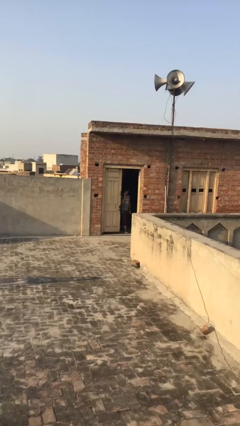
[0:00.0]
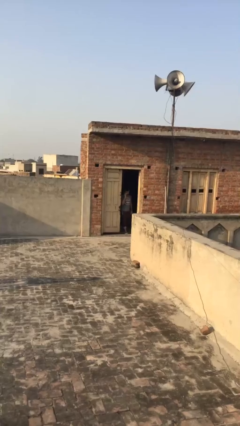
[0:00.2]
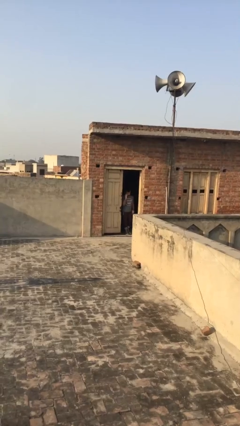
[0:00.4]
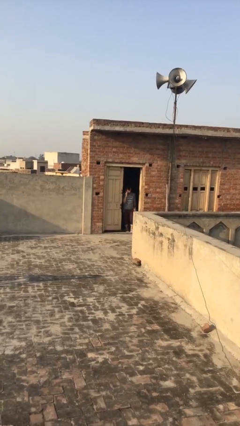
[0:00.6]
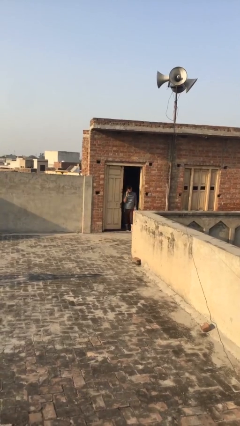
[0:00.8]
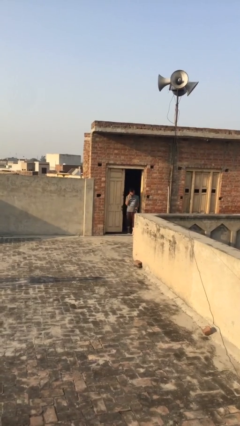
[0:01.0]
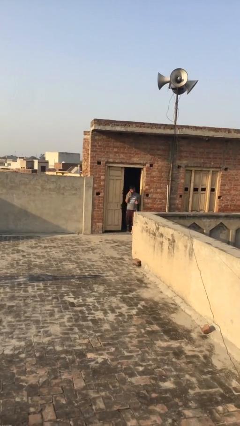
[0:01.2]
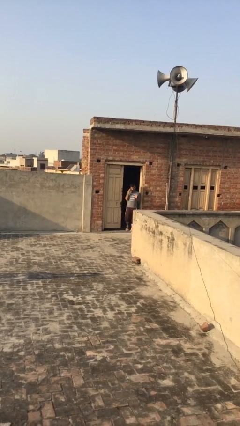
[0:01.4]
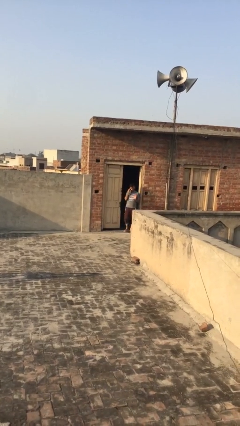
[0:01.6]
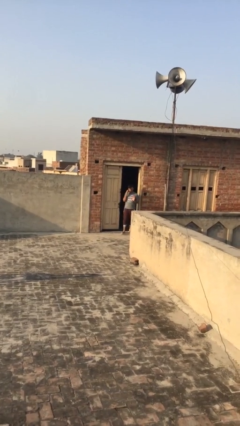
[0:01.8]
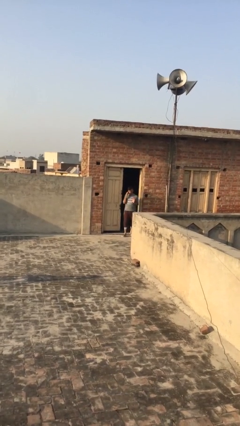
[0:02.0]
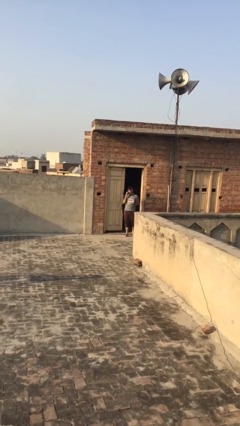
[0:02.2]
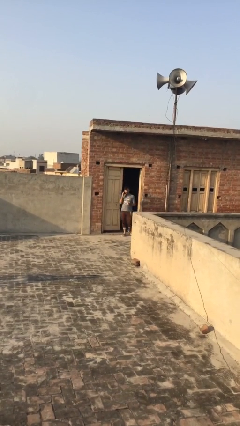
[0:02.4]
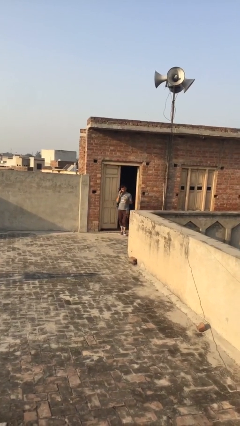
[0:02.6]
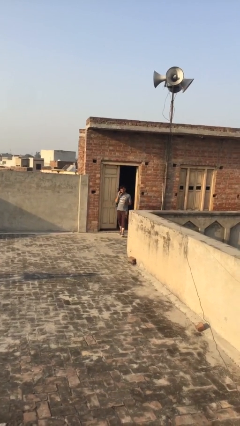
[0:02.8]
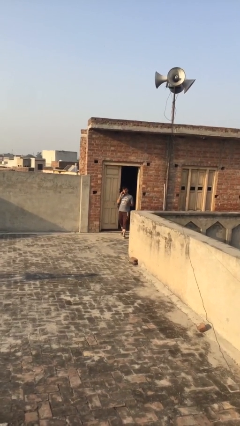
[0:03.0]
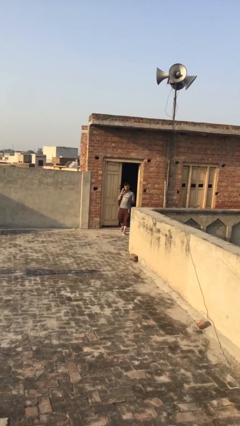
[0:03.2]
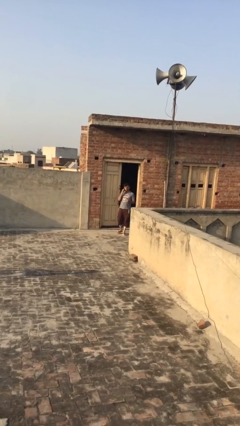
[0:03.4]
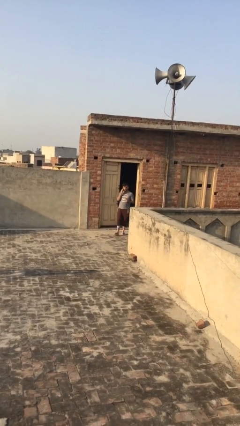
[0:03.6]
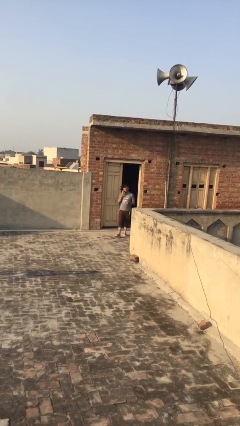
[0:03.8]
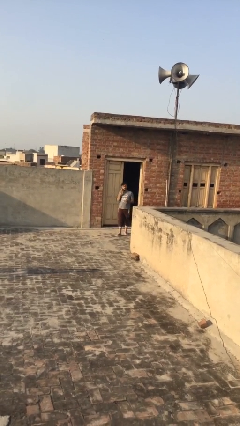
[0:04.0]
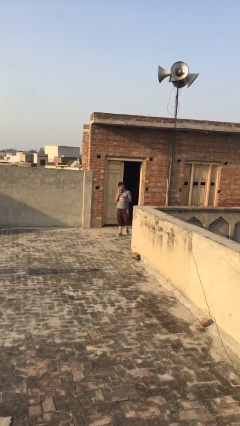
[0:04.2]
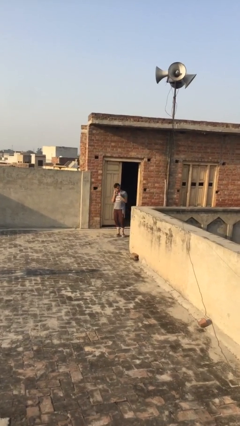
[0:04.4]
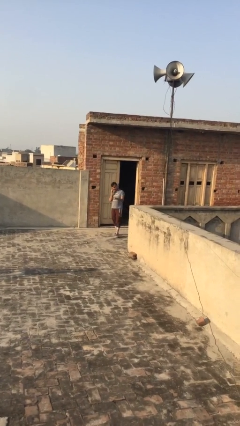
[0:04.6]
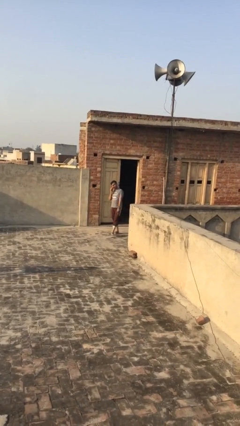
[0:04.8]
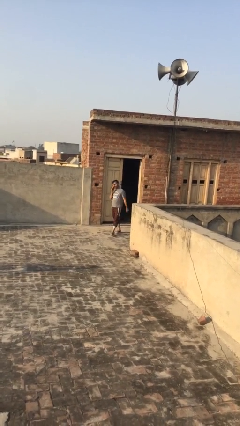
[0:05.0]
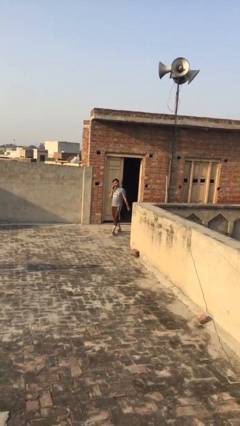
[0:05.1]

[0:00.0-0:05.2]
person enters scene through structure

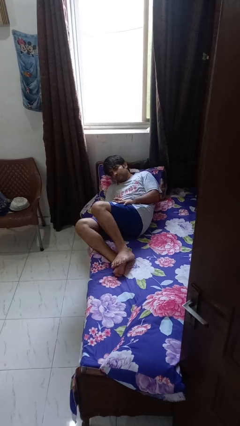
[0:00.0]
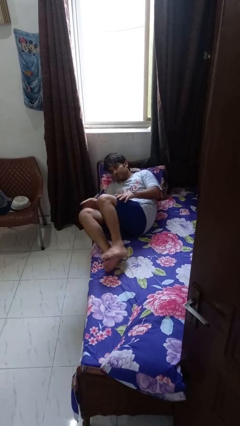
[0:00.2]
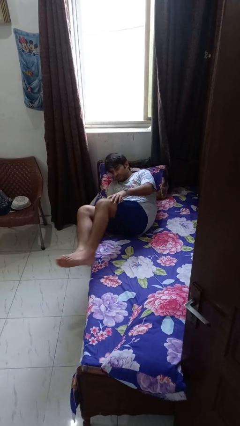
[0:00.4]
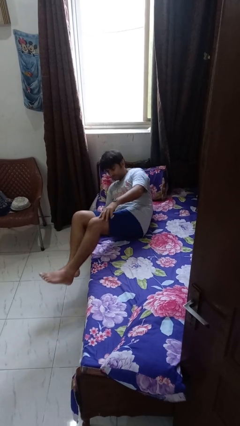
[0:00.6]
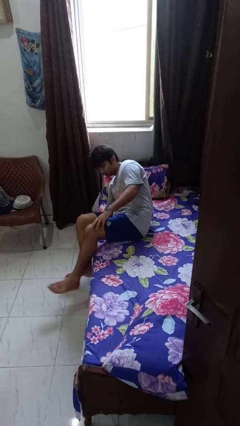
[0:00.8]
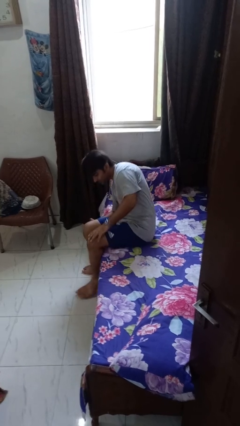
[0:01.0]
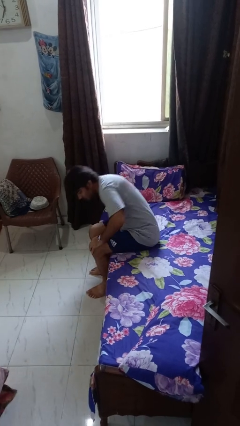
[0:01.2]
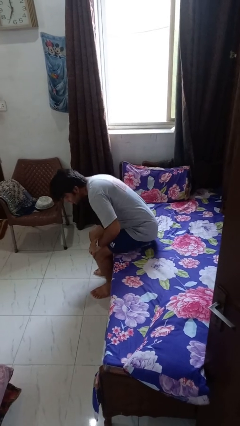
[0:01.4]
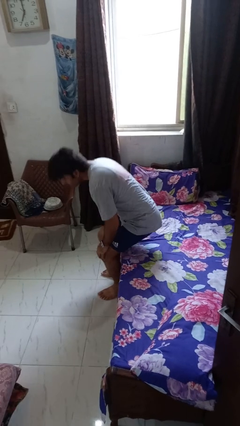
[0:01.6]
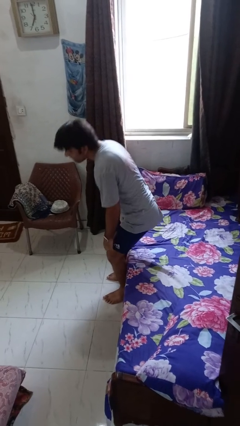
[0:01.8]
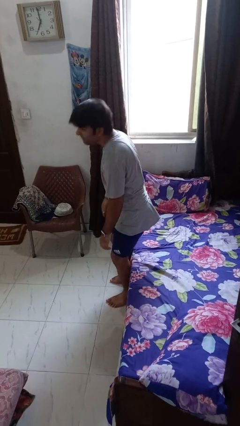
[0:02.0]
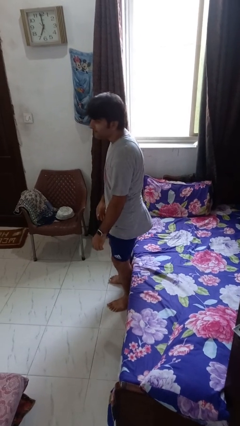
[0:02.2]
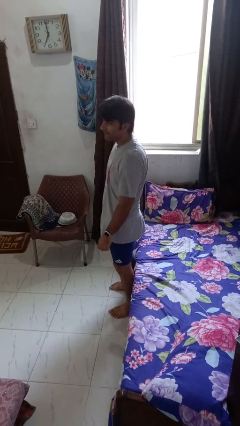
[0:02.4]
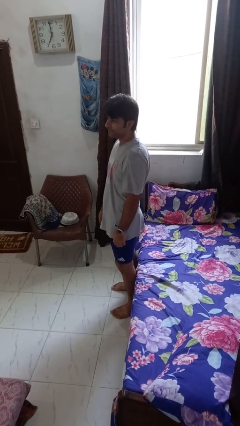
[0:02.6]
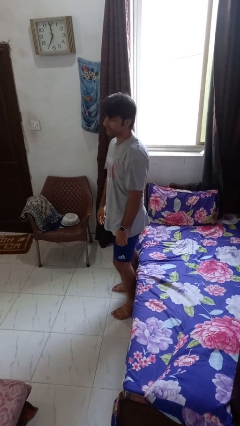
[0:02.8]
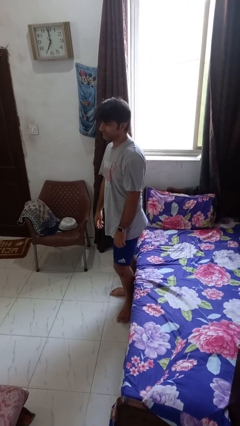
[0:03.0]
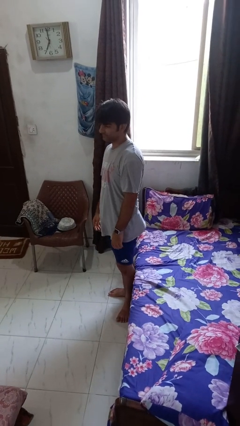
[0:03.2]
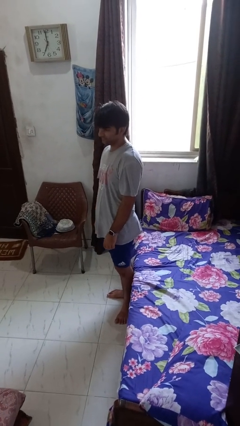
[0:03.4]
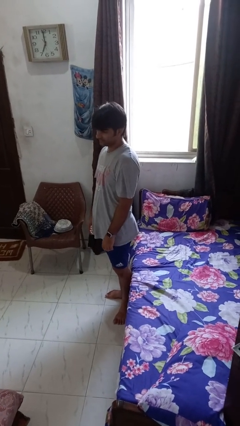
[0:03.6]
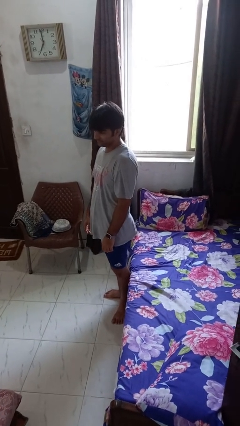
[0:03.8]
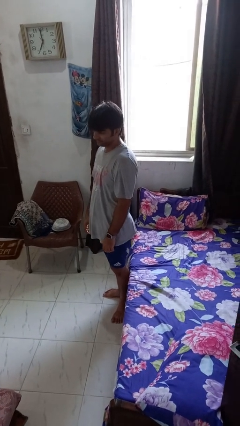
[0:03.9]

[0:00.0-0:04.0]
person stands up

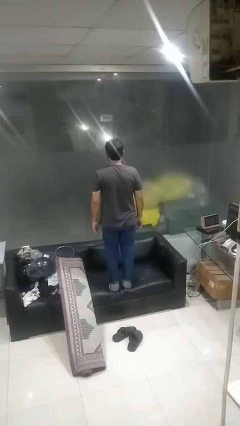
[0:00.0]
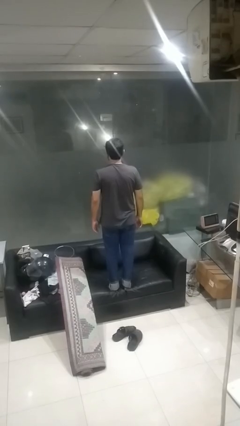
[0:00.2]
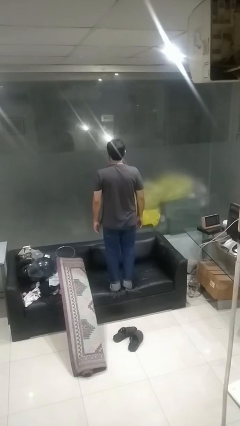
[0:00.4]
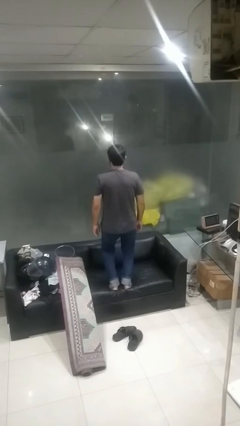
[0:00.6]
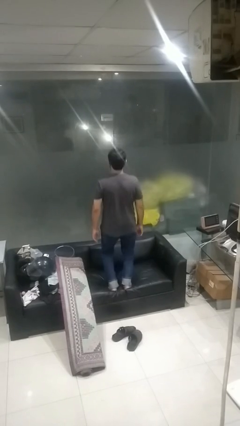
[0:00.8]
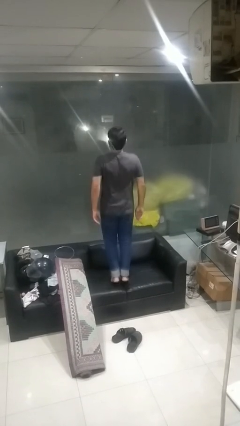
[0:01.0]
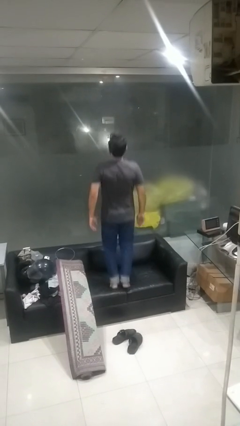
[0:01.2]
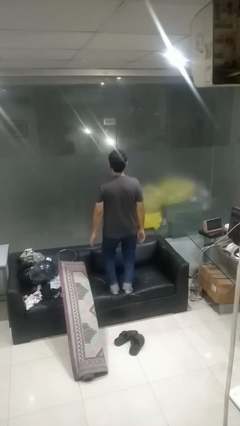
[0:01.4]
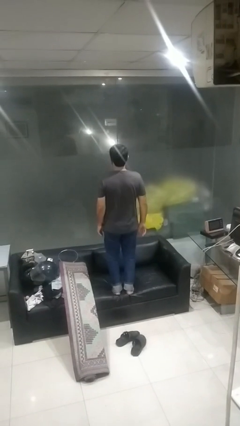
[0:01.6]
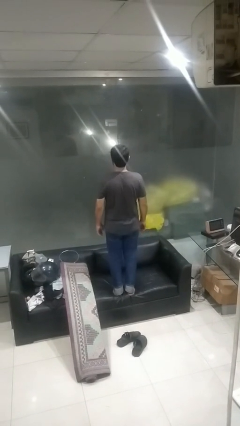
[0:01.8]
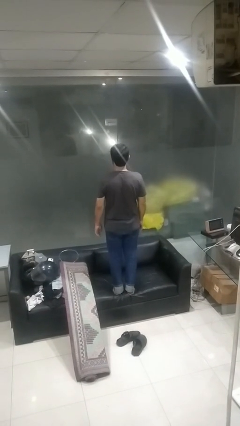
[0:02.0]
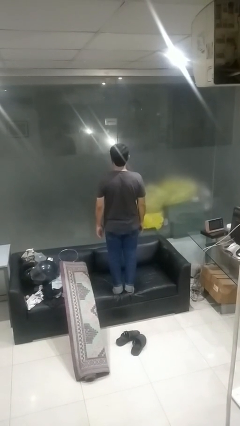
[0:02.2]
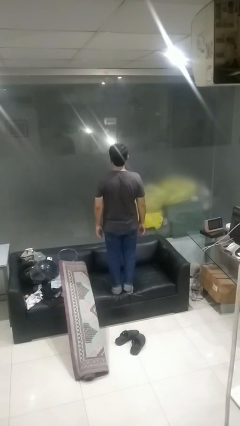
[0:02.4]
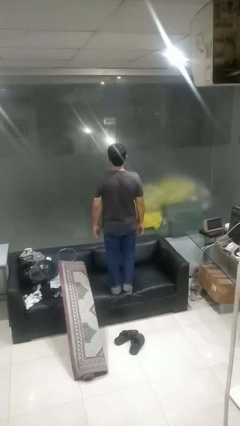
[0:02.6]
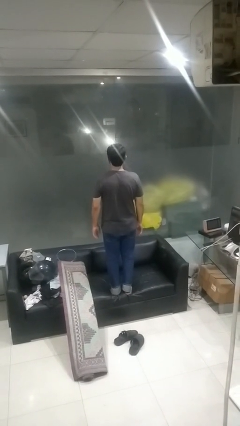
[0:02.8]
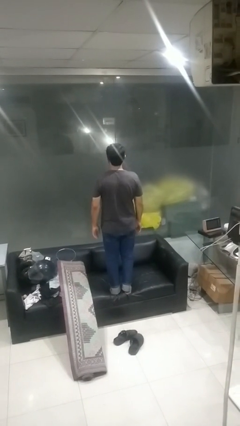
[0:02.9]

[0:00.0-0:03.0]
person jumps on couch

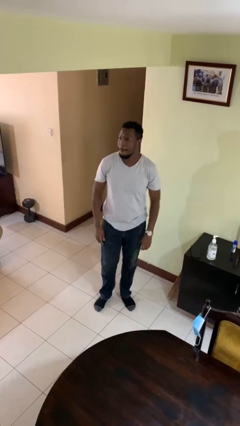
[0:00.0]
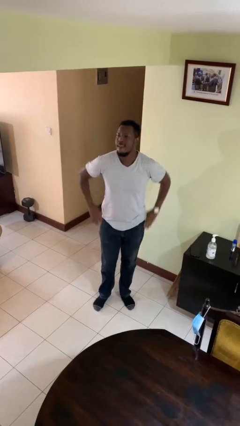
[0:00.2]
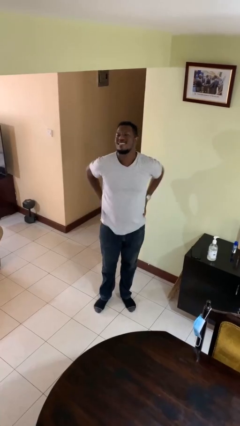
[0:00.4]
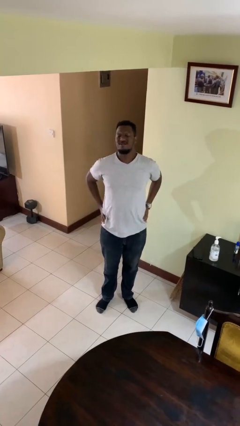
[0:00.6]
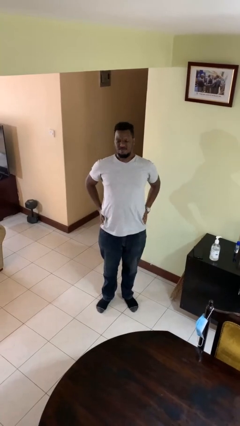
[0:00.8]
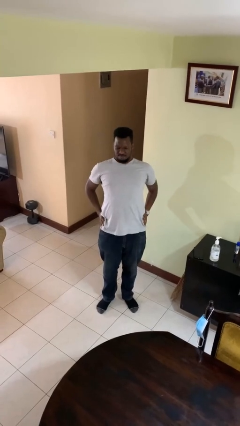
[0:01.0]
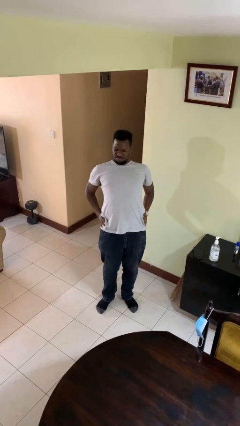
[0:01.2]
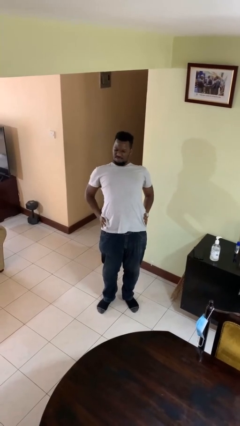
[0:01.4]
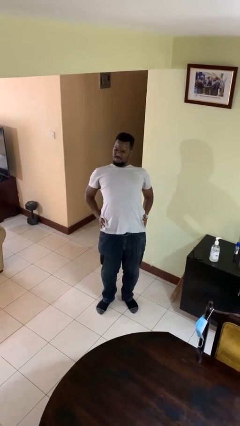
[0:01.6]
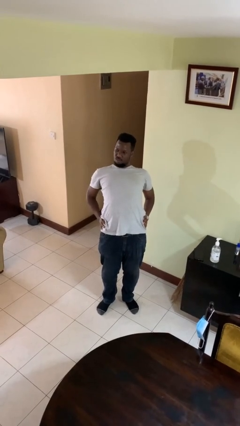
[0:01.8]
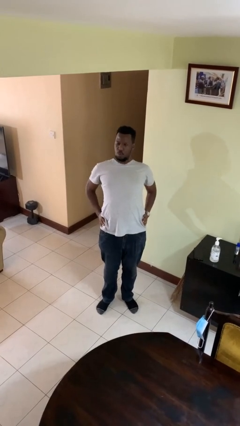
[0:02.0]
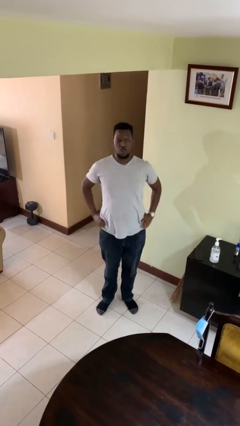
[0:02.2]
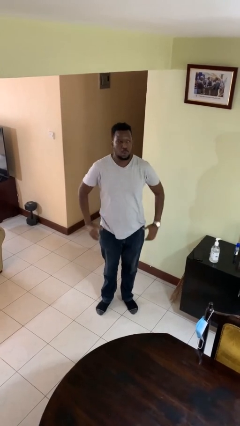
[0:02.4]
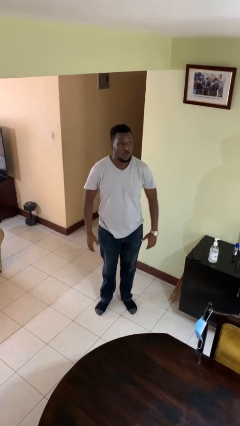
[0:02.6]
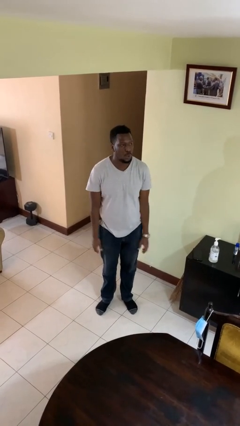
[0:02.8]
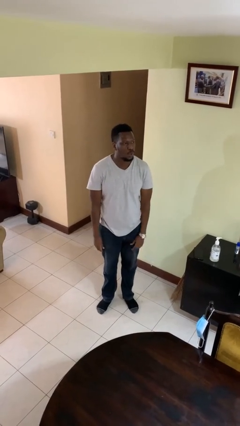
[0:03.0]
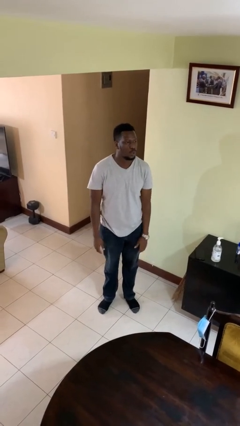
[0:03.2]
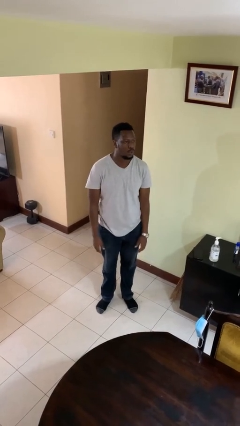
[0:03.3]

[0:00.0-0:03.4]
person stretches back

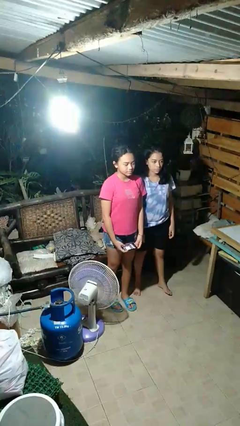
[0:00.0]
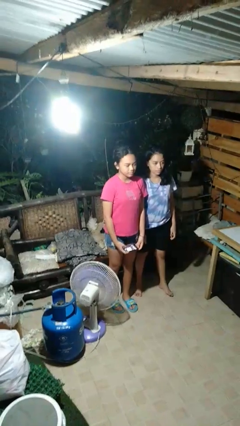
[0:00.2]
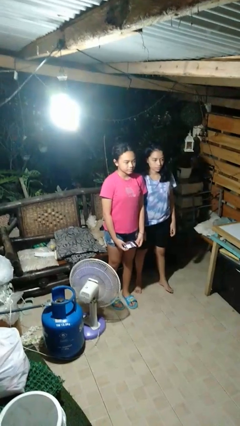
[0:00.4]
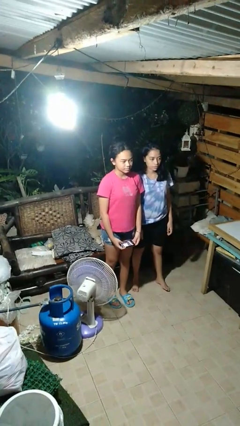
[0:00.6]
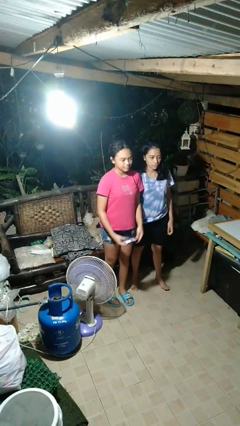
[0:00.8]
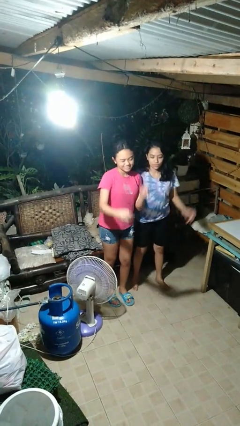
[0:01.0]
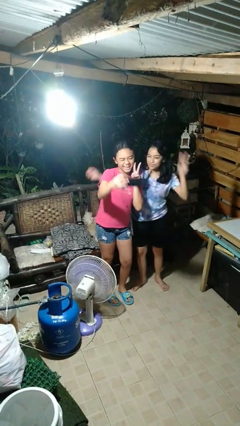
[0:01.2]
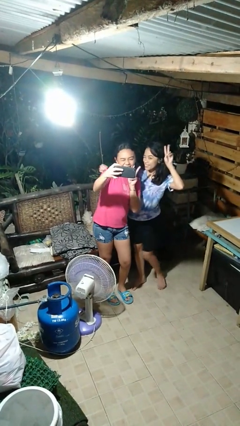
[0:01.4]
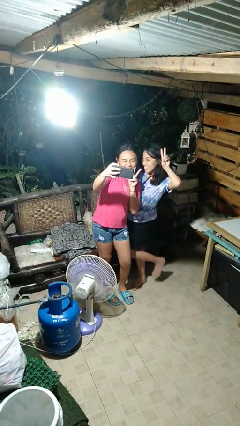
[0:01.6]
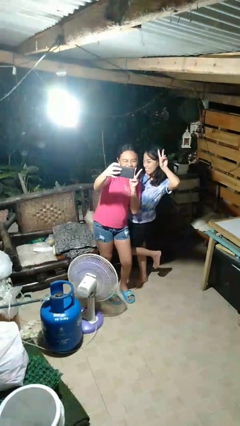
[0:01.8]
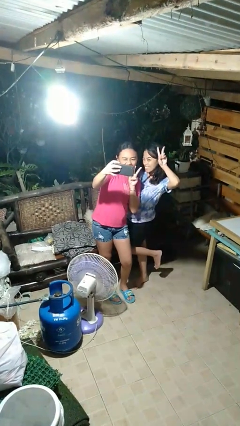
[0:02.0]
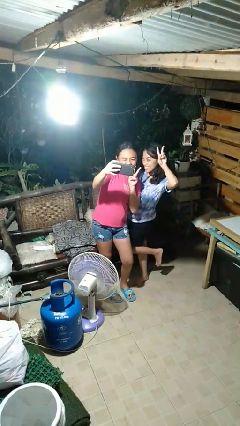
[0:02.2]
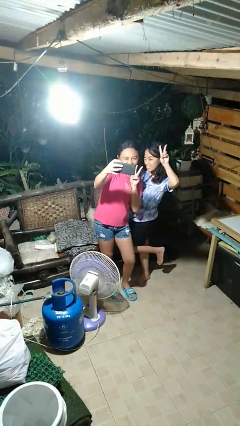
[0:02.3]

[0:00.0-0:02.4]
person takes selfie with person
